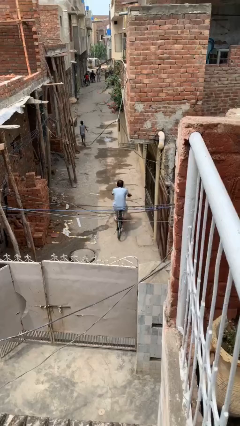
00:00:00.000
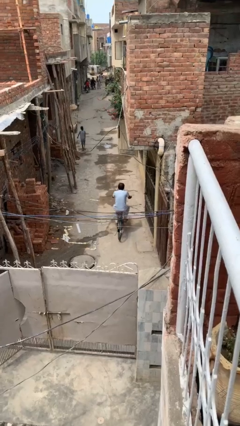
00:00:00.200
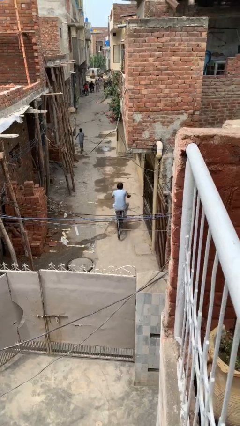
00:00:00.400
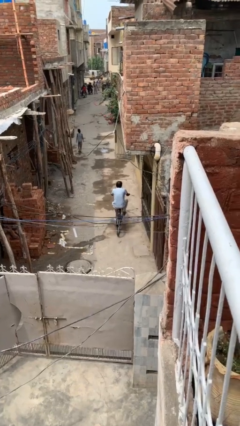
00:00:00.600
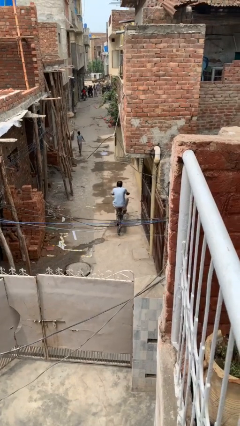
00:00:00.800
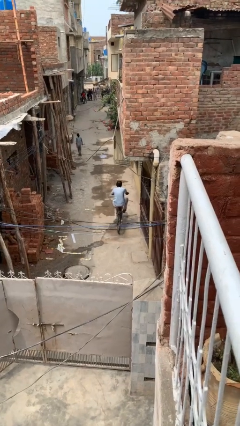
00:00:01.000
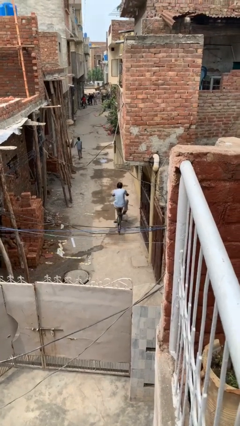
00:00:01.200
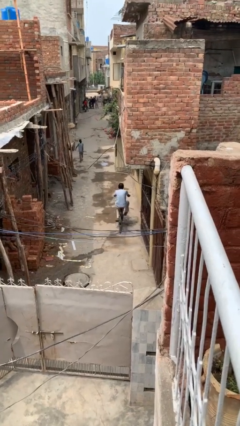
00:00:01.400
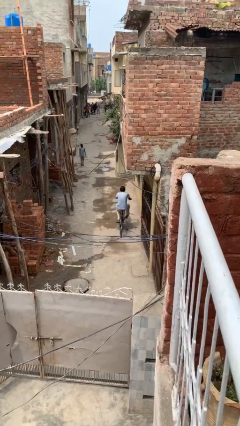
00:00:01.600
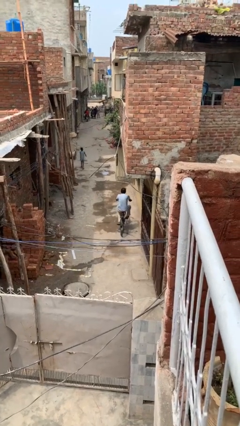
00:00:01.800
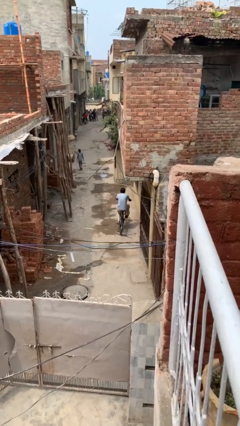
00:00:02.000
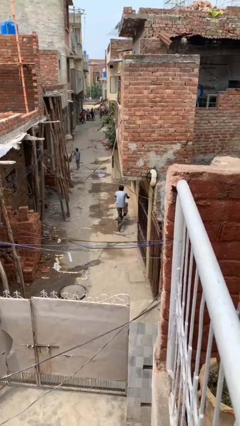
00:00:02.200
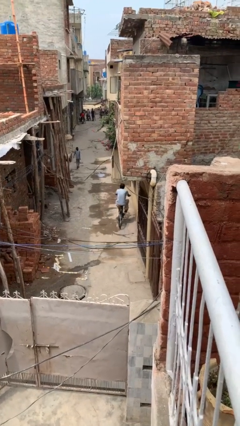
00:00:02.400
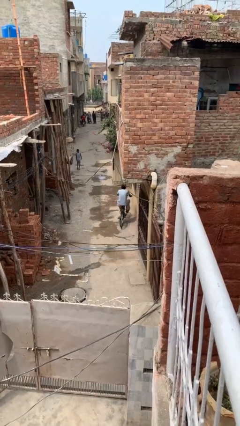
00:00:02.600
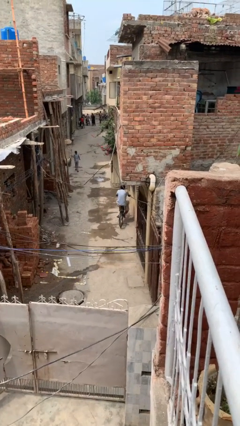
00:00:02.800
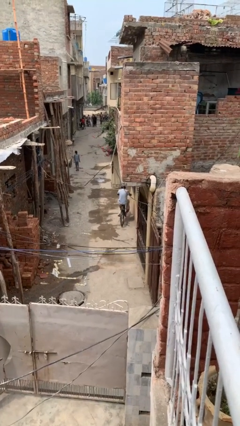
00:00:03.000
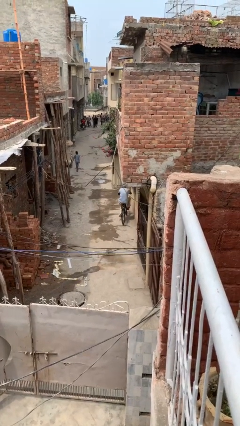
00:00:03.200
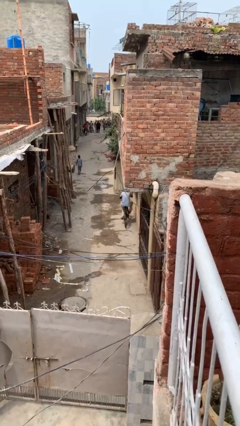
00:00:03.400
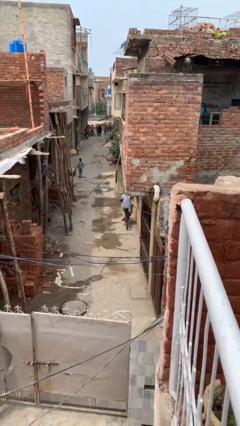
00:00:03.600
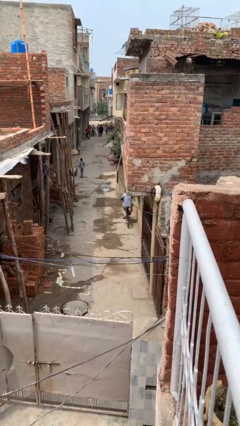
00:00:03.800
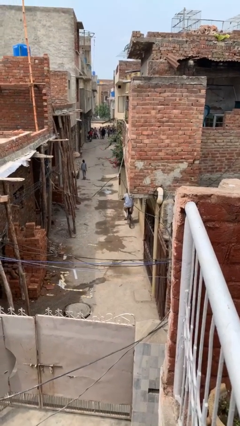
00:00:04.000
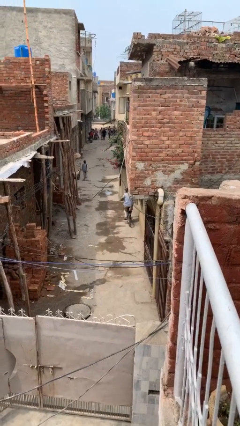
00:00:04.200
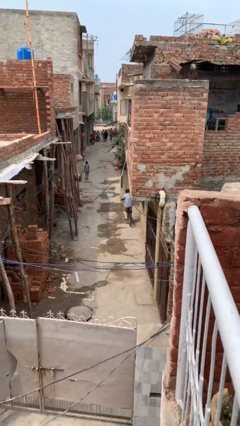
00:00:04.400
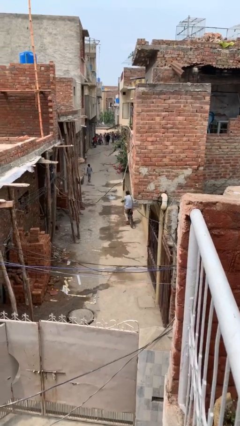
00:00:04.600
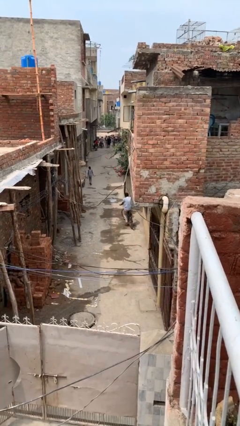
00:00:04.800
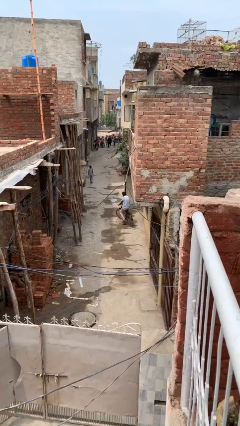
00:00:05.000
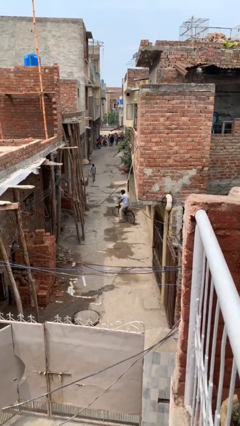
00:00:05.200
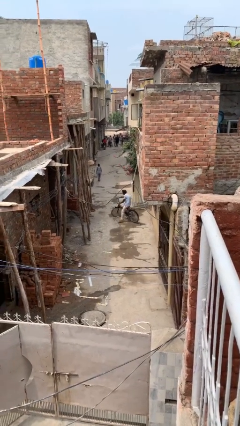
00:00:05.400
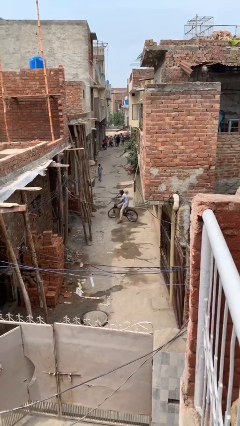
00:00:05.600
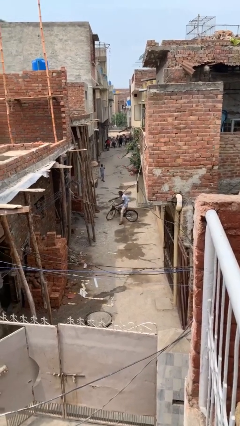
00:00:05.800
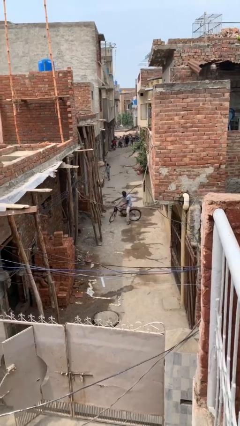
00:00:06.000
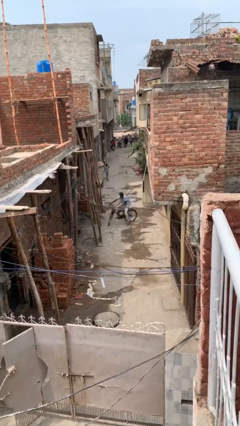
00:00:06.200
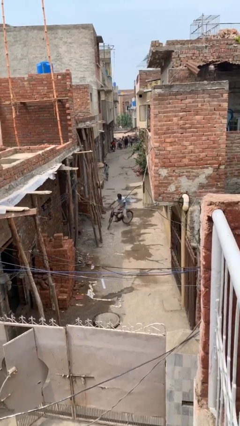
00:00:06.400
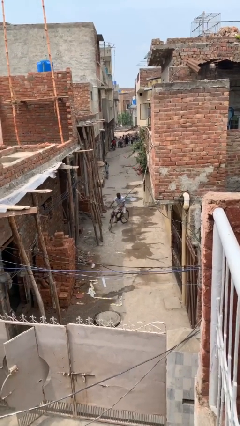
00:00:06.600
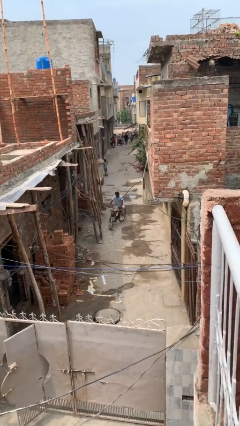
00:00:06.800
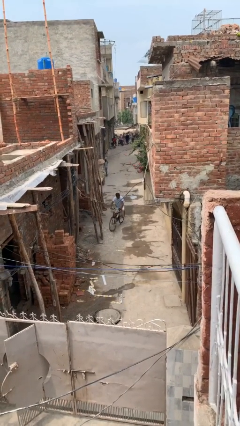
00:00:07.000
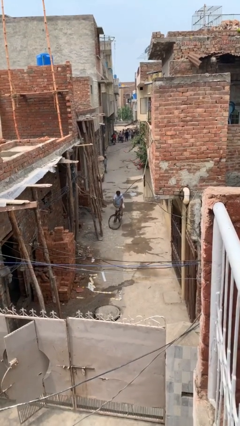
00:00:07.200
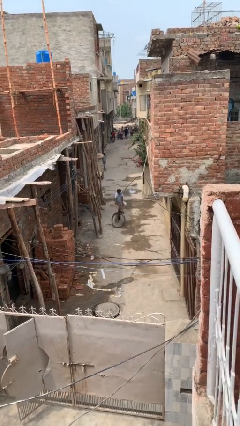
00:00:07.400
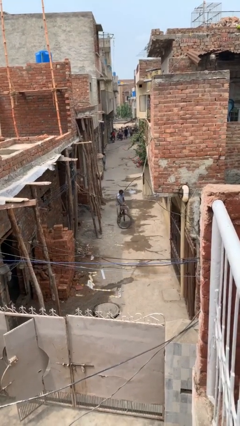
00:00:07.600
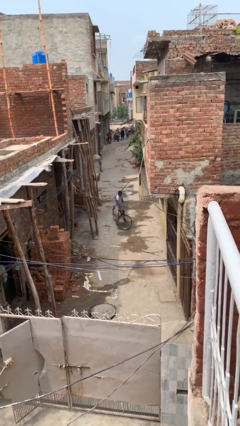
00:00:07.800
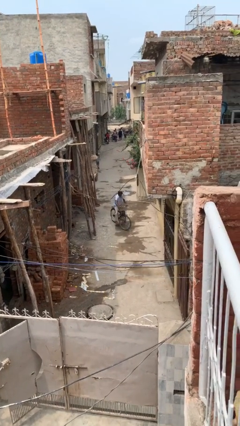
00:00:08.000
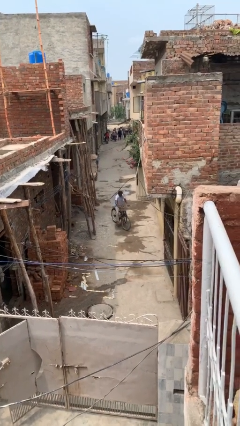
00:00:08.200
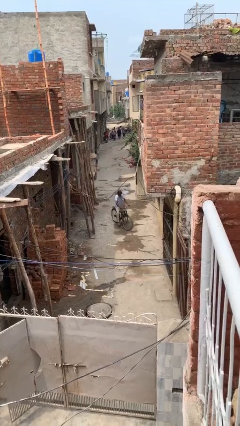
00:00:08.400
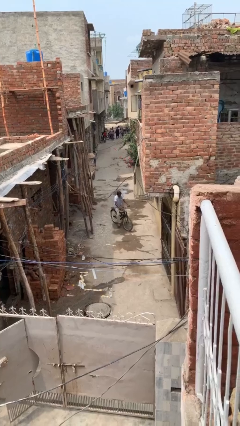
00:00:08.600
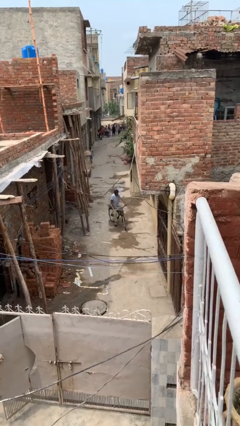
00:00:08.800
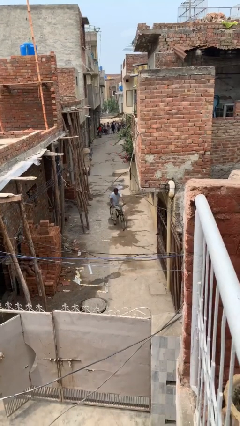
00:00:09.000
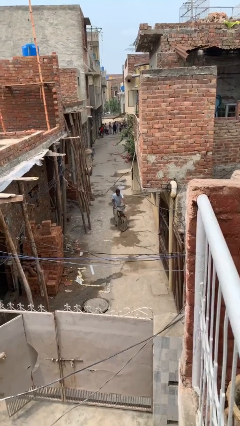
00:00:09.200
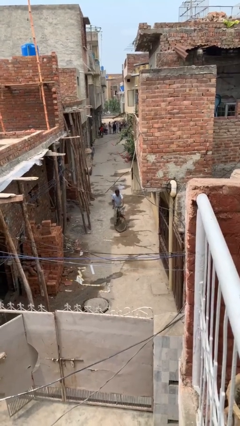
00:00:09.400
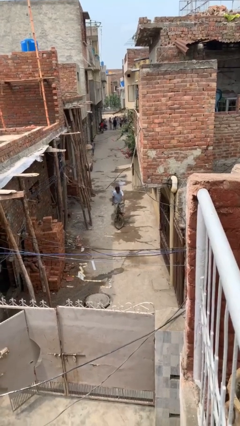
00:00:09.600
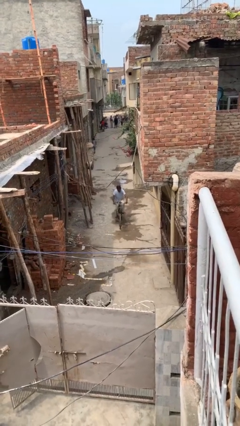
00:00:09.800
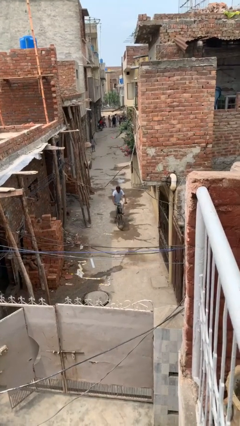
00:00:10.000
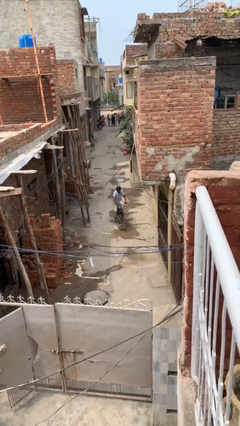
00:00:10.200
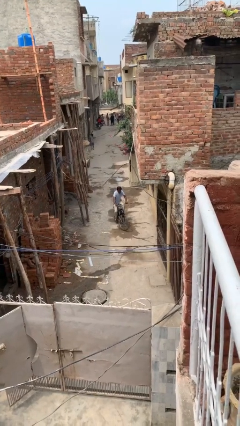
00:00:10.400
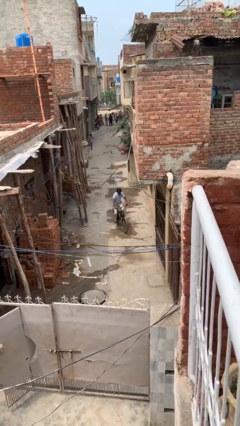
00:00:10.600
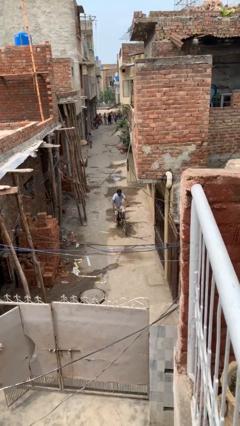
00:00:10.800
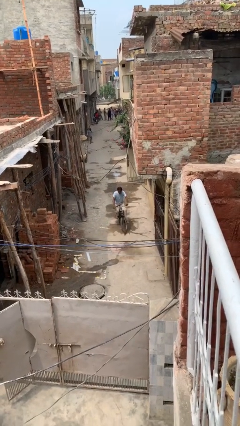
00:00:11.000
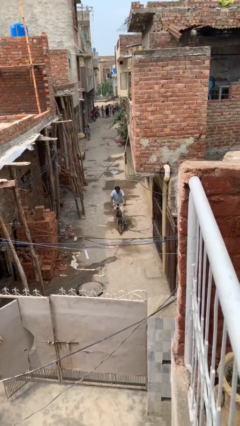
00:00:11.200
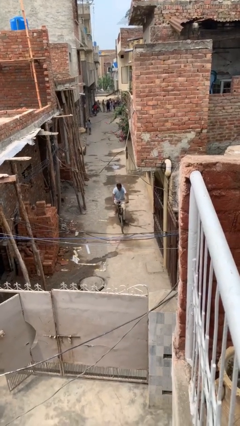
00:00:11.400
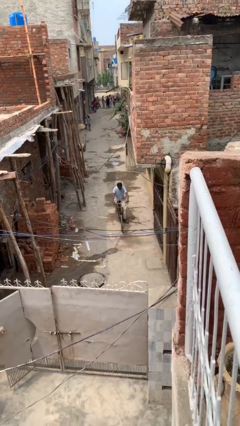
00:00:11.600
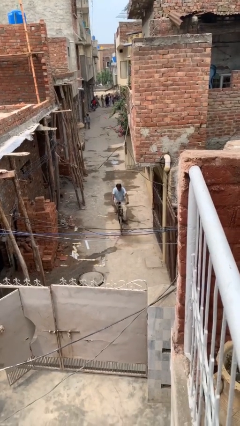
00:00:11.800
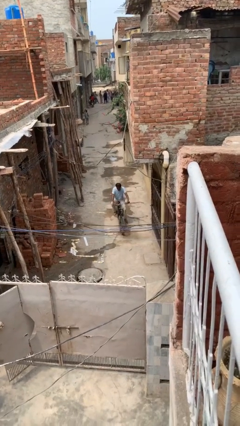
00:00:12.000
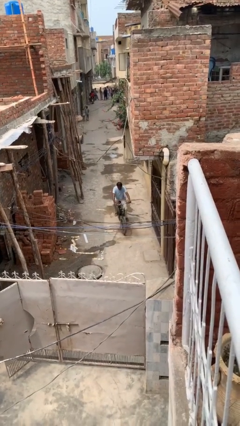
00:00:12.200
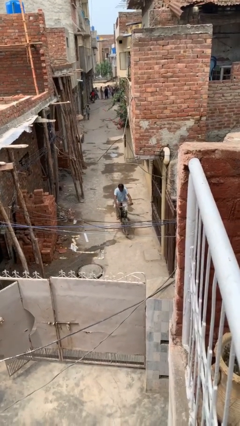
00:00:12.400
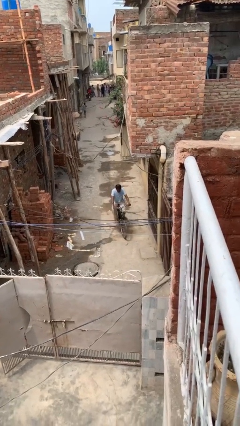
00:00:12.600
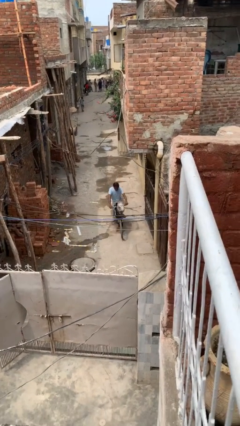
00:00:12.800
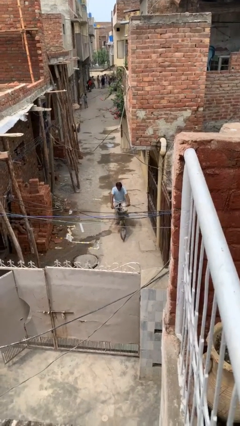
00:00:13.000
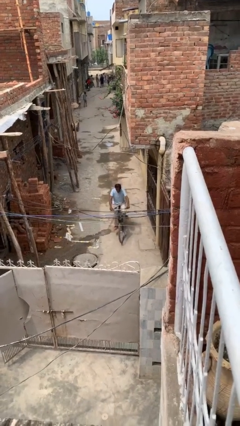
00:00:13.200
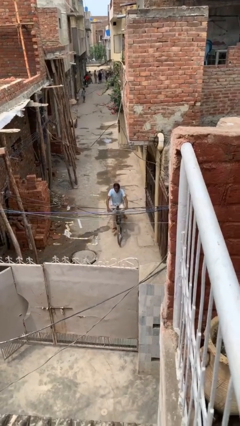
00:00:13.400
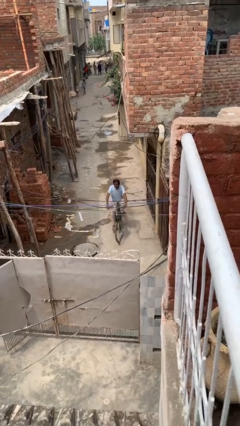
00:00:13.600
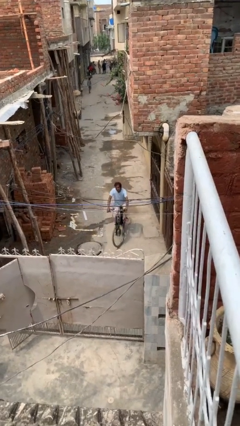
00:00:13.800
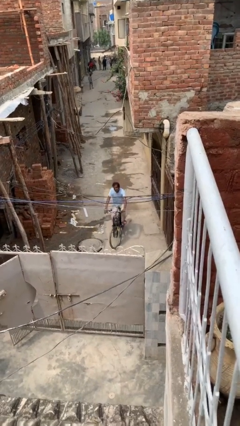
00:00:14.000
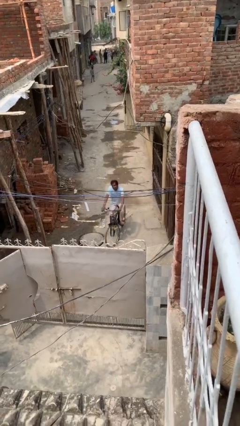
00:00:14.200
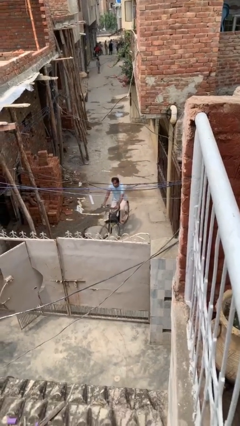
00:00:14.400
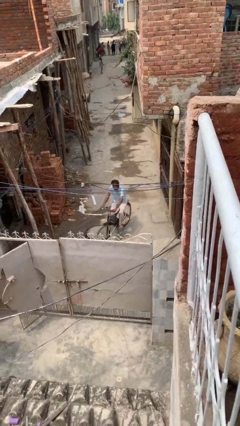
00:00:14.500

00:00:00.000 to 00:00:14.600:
person rides bicycle

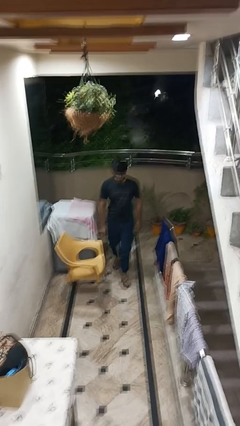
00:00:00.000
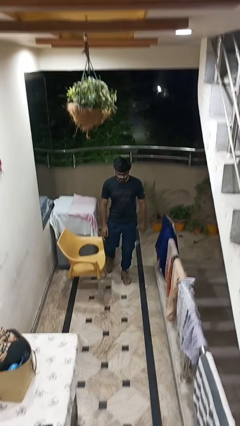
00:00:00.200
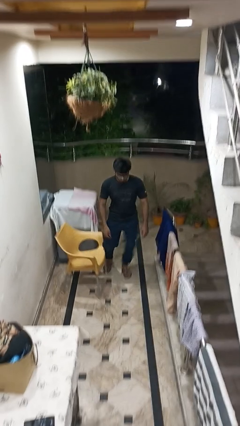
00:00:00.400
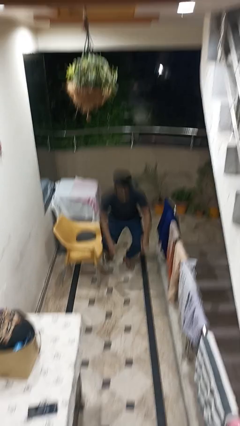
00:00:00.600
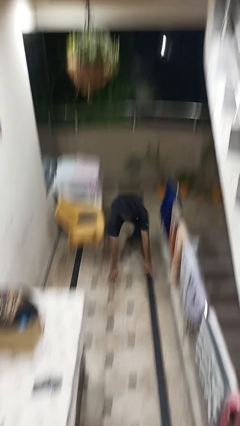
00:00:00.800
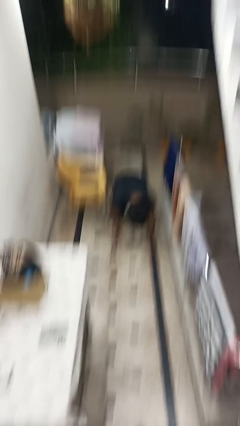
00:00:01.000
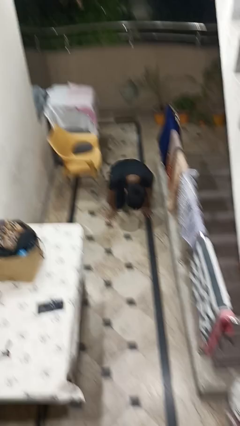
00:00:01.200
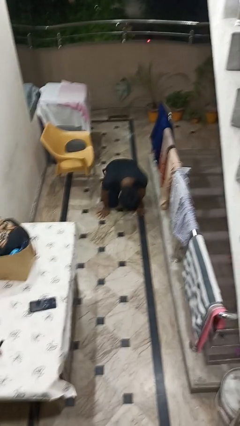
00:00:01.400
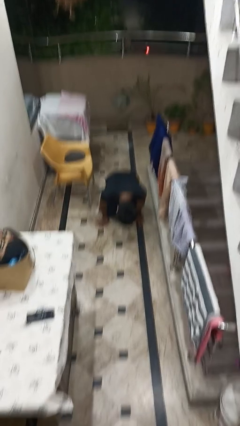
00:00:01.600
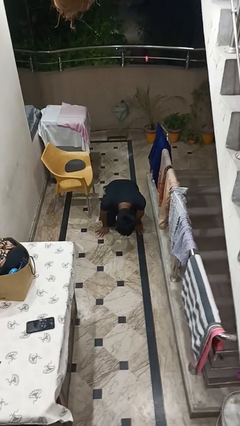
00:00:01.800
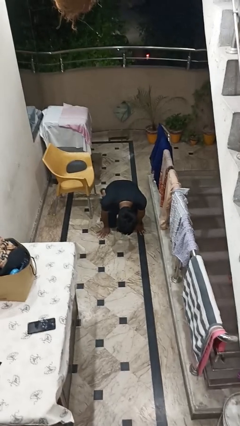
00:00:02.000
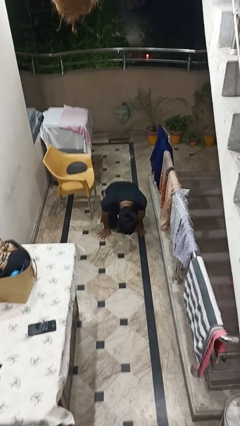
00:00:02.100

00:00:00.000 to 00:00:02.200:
person trips on object on floor

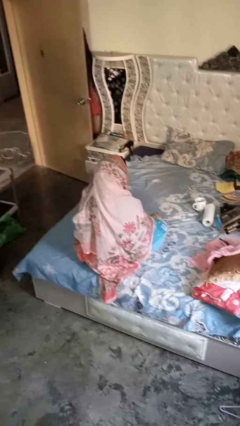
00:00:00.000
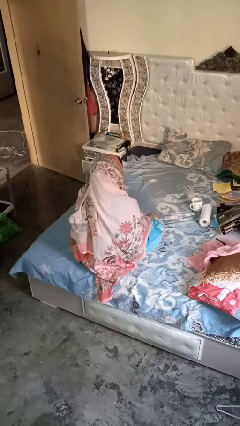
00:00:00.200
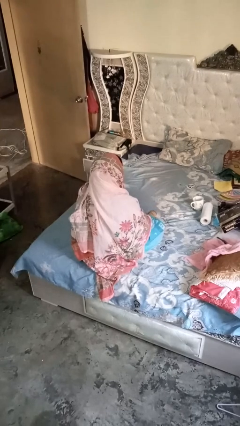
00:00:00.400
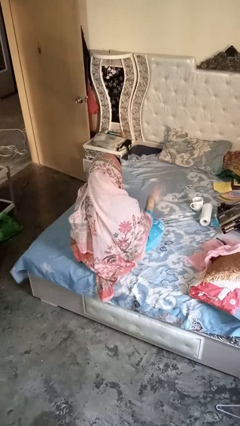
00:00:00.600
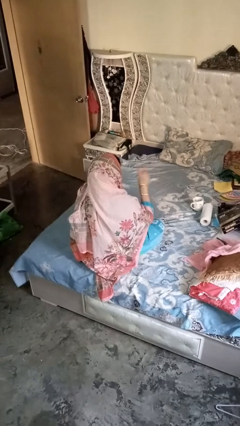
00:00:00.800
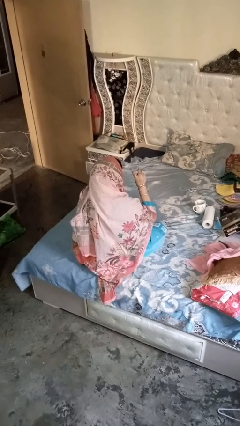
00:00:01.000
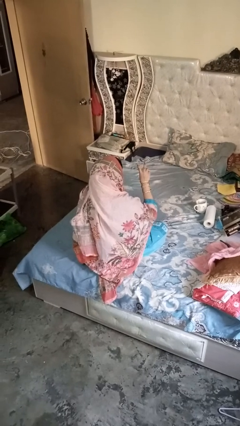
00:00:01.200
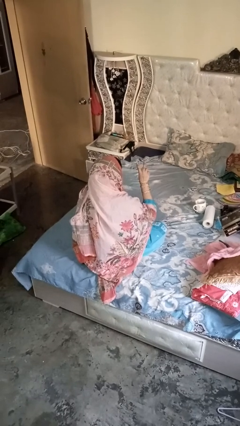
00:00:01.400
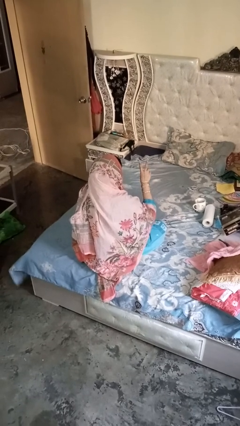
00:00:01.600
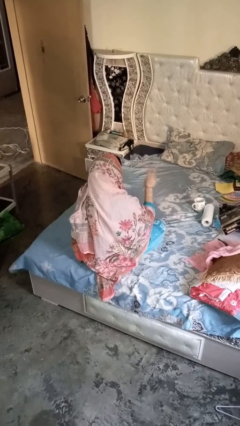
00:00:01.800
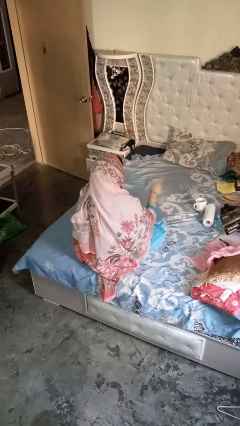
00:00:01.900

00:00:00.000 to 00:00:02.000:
person gestures be quiet
